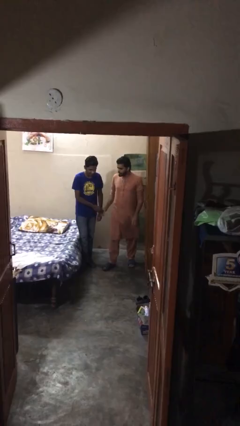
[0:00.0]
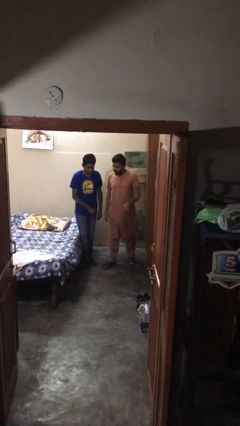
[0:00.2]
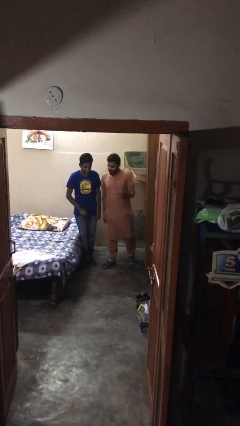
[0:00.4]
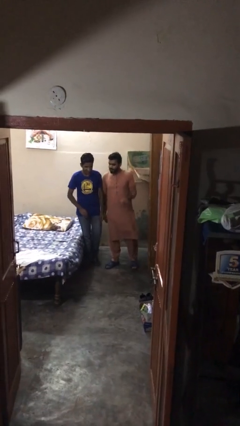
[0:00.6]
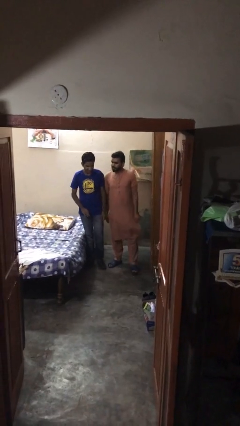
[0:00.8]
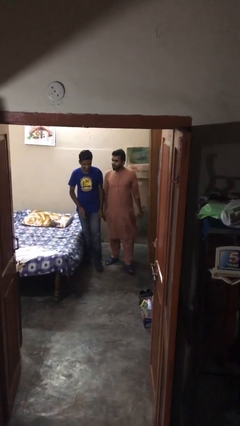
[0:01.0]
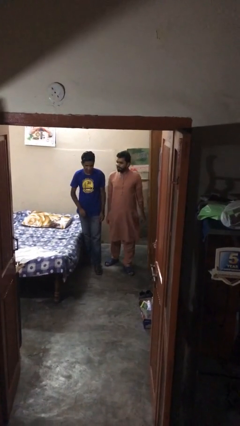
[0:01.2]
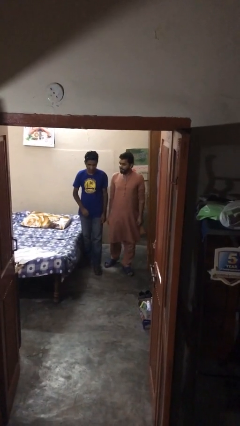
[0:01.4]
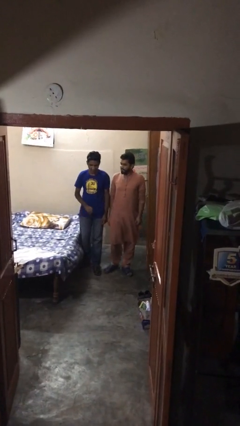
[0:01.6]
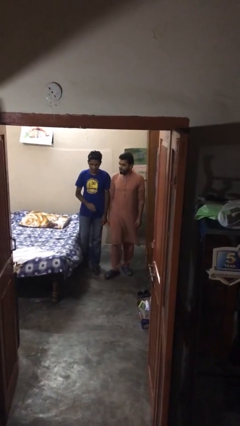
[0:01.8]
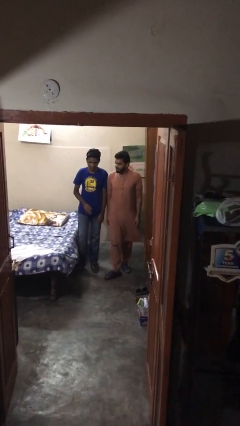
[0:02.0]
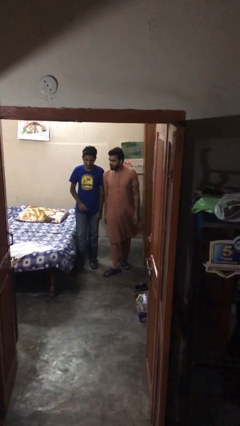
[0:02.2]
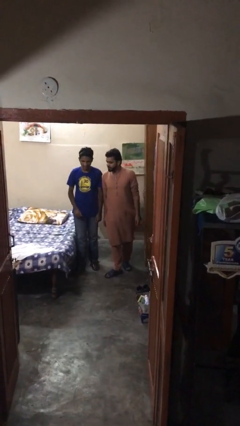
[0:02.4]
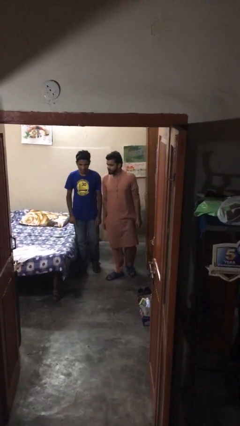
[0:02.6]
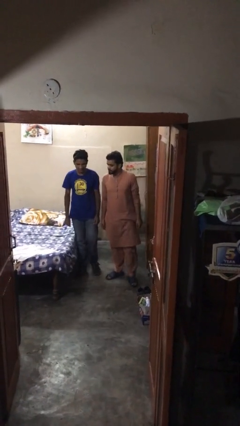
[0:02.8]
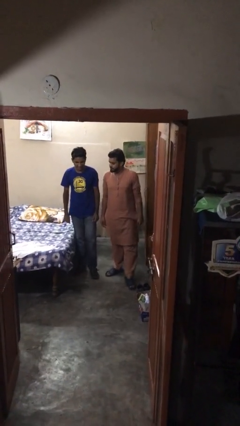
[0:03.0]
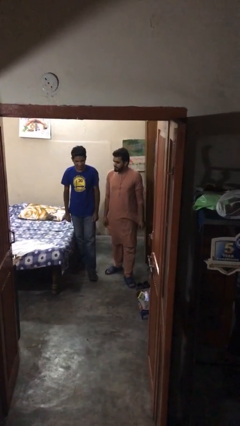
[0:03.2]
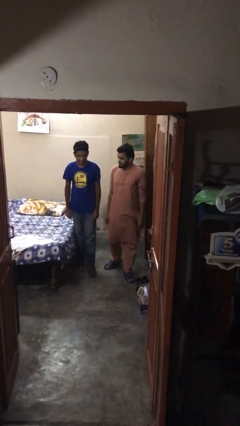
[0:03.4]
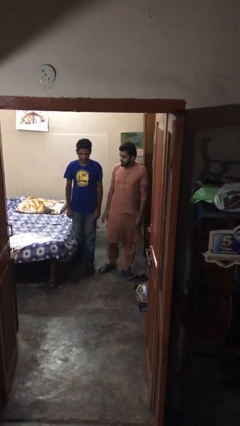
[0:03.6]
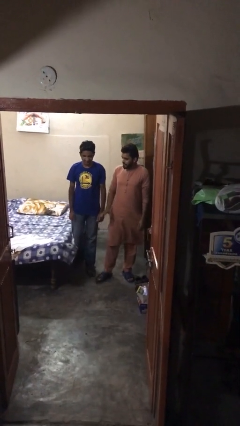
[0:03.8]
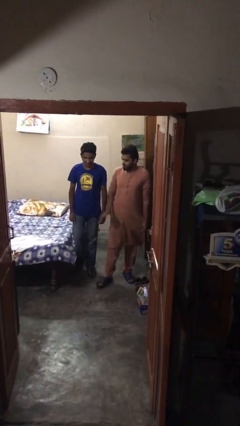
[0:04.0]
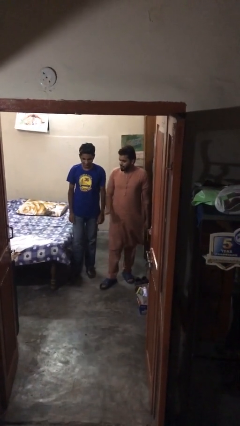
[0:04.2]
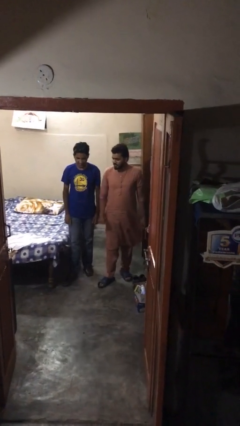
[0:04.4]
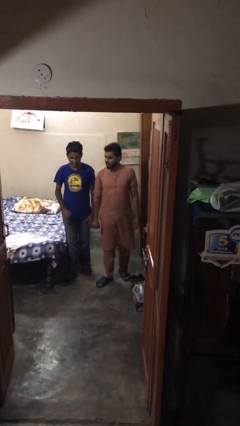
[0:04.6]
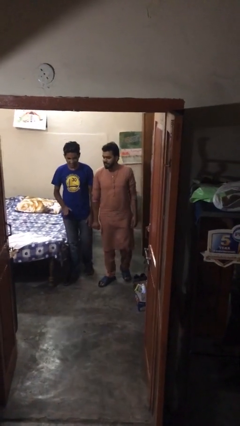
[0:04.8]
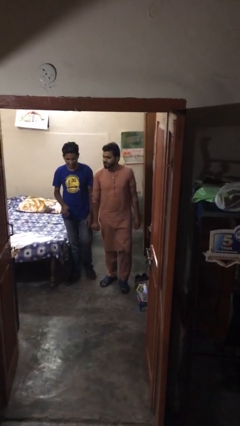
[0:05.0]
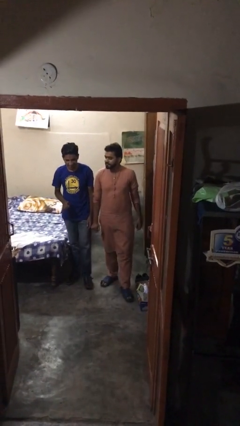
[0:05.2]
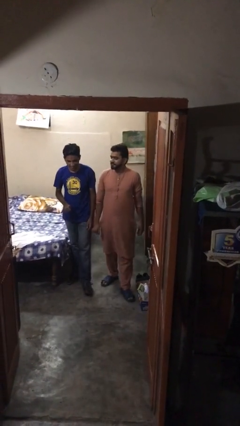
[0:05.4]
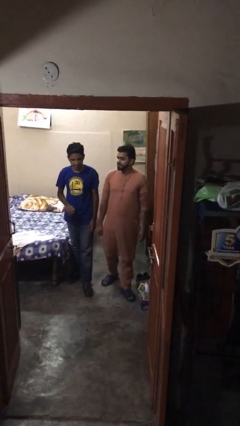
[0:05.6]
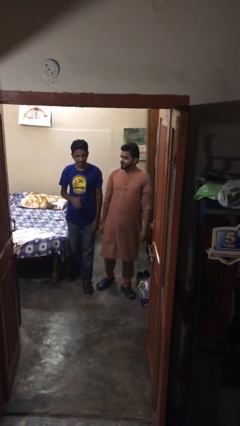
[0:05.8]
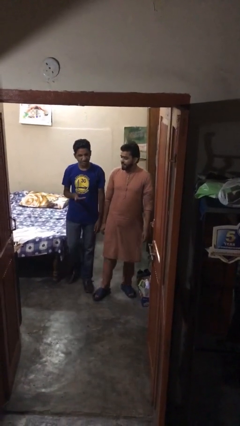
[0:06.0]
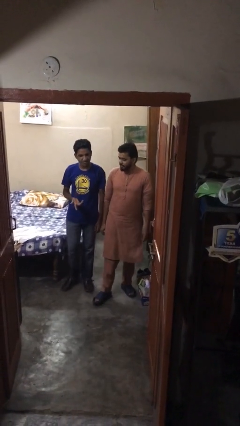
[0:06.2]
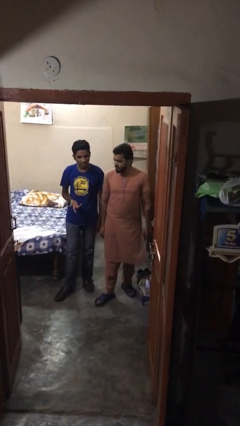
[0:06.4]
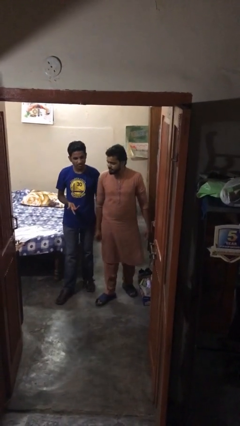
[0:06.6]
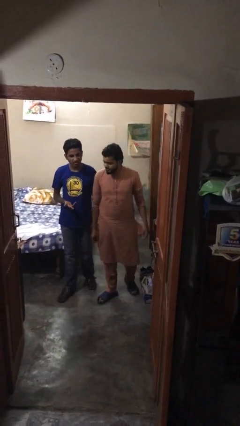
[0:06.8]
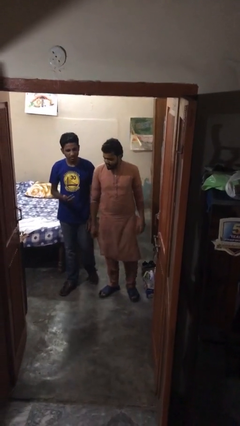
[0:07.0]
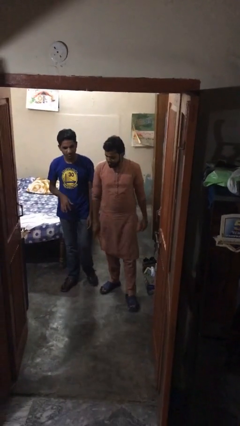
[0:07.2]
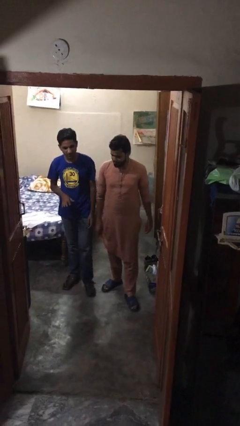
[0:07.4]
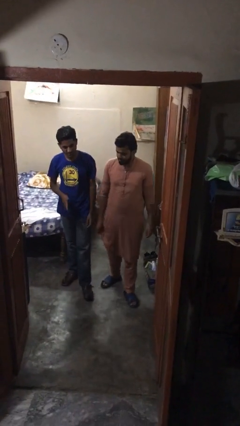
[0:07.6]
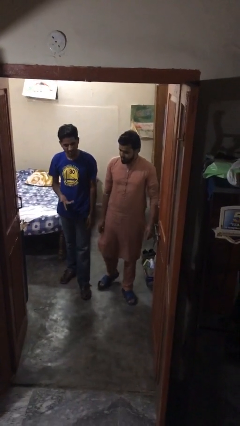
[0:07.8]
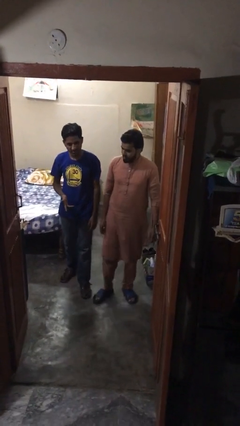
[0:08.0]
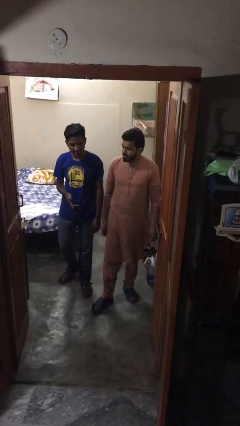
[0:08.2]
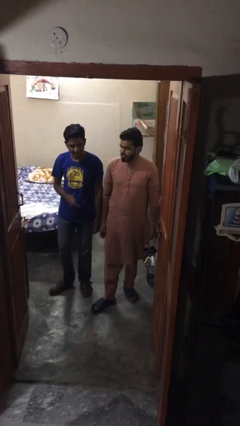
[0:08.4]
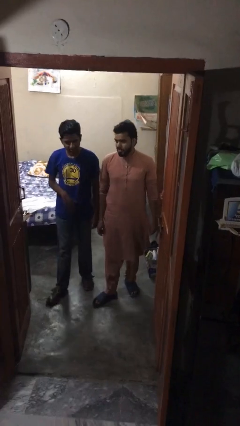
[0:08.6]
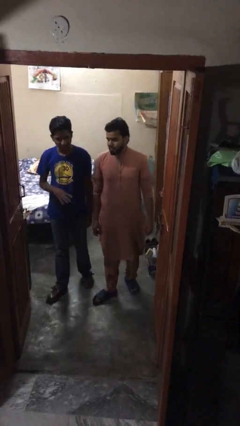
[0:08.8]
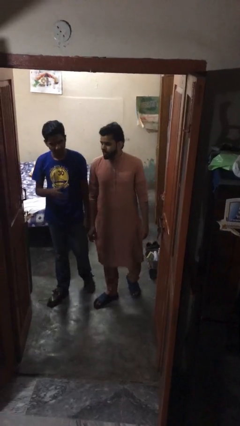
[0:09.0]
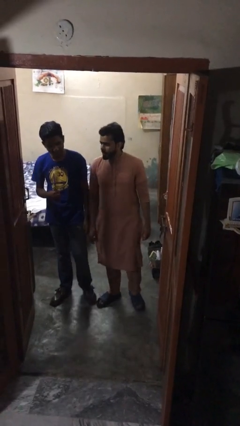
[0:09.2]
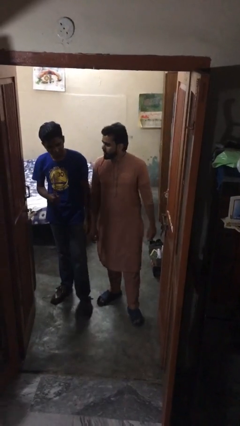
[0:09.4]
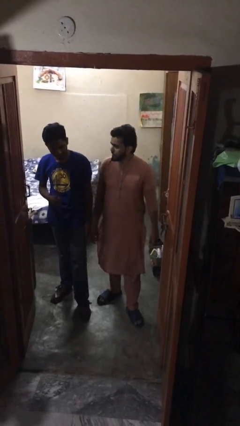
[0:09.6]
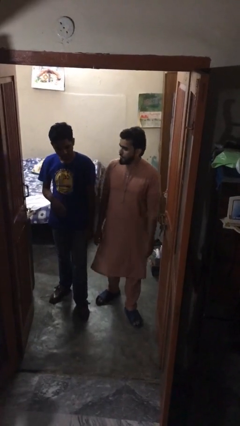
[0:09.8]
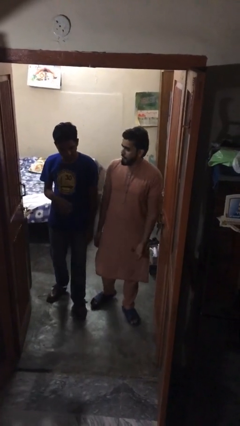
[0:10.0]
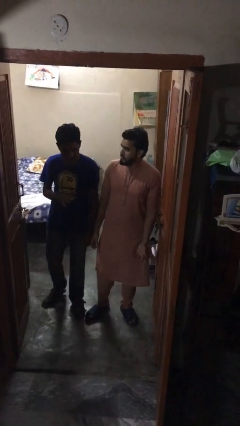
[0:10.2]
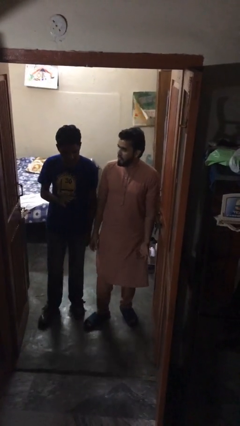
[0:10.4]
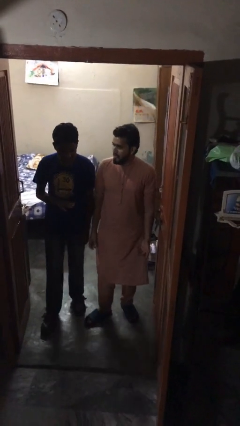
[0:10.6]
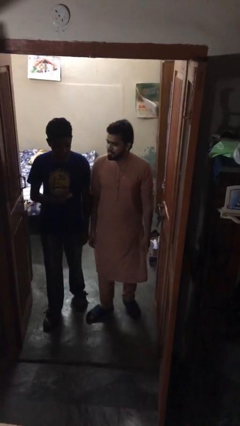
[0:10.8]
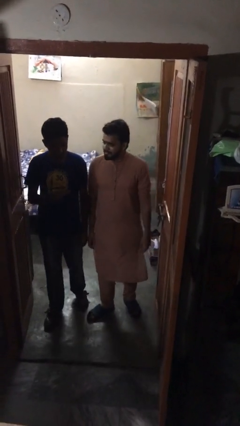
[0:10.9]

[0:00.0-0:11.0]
person talks to person

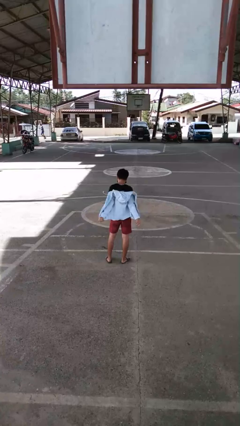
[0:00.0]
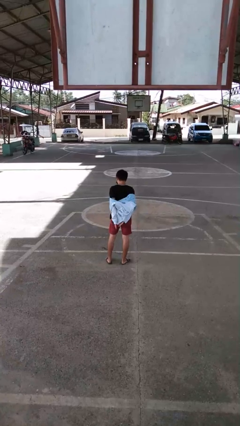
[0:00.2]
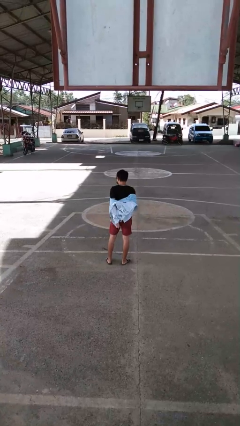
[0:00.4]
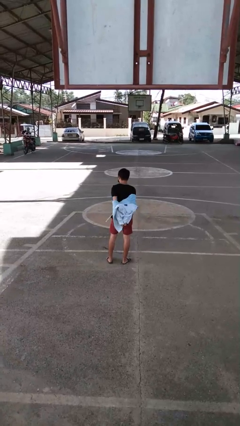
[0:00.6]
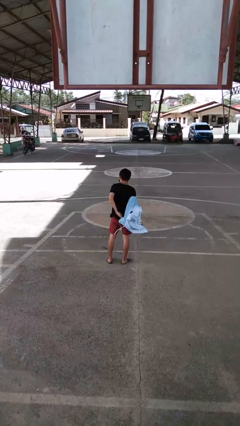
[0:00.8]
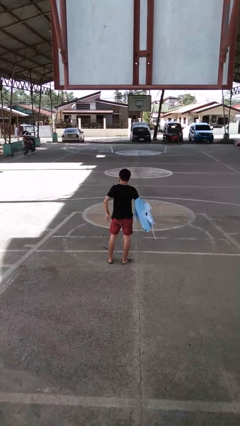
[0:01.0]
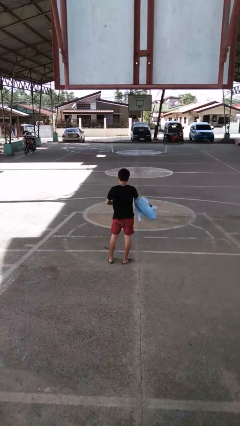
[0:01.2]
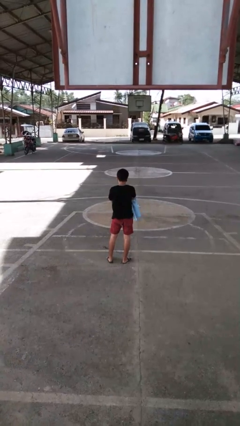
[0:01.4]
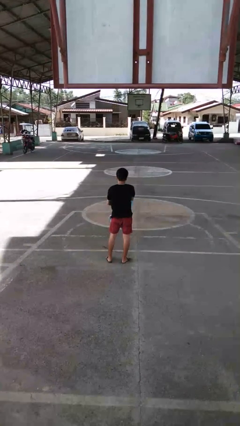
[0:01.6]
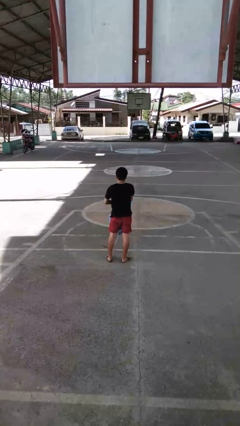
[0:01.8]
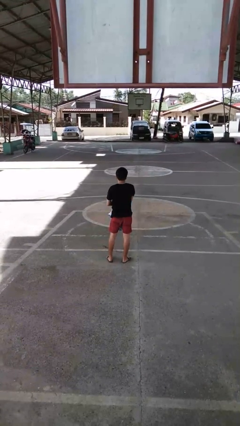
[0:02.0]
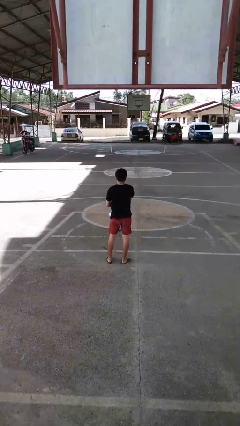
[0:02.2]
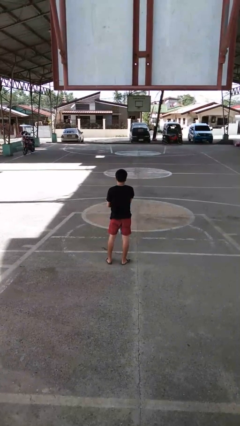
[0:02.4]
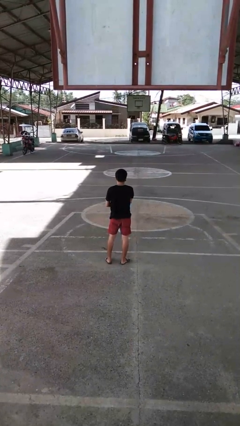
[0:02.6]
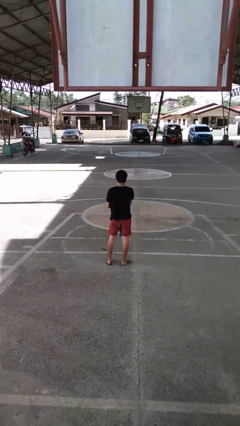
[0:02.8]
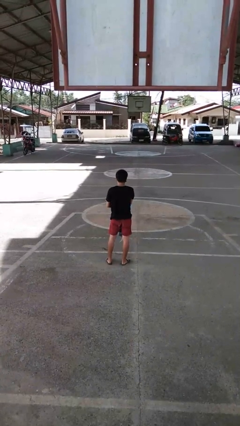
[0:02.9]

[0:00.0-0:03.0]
person takes off jacket

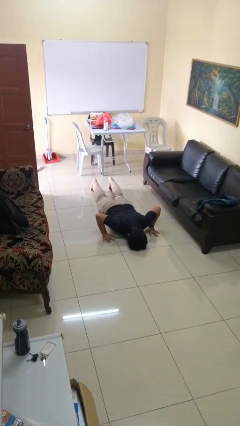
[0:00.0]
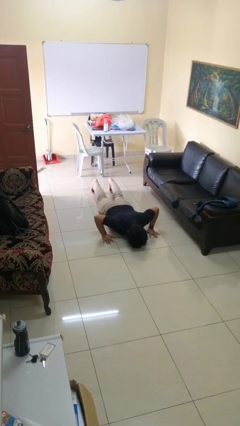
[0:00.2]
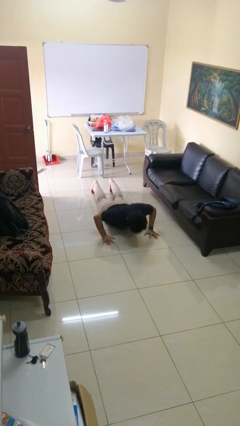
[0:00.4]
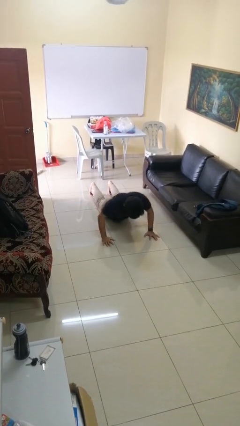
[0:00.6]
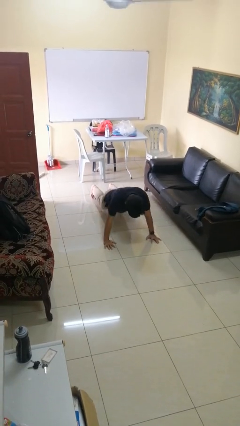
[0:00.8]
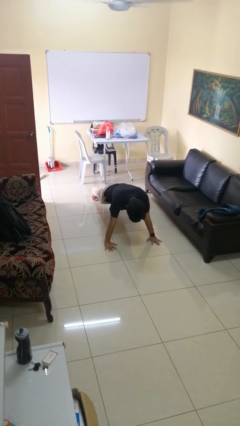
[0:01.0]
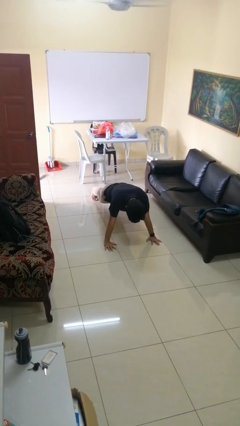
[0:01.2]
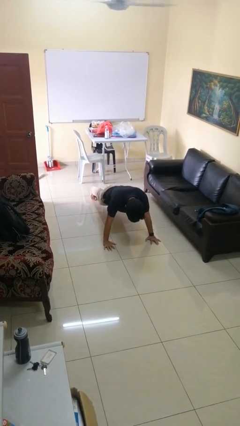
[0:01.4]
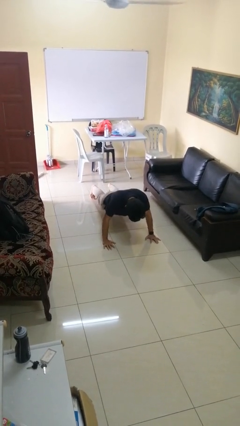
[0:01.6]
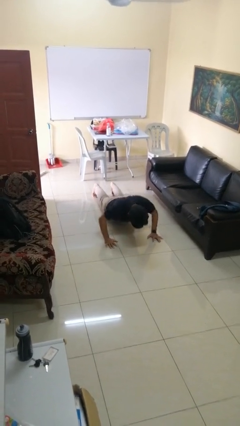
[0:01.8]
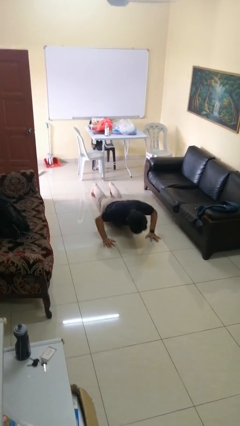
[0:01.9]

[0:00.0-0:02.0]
person exercises with pushup

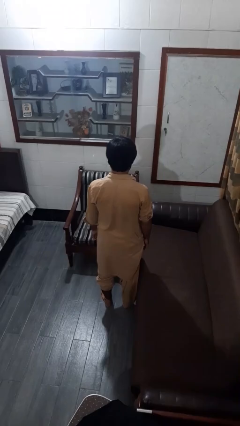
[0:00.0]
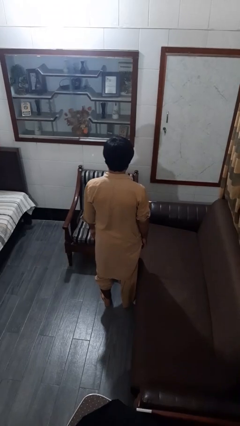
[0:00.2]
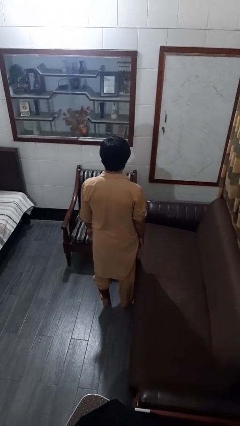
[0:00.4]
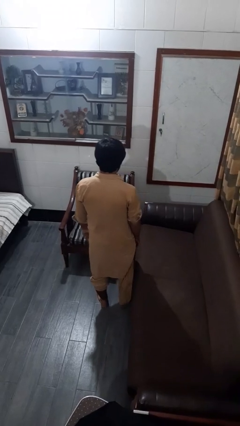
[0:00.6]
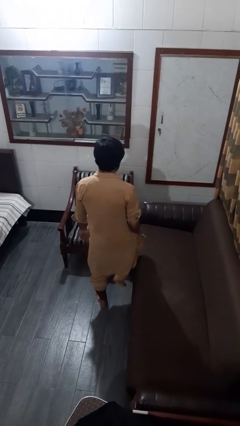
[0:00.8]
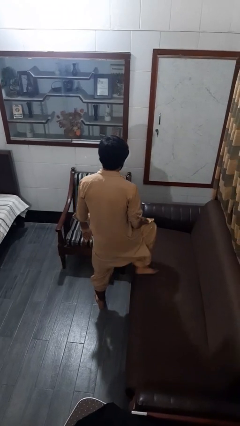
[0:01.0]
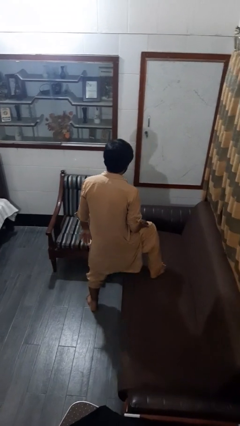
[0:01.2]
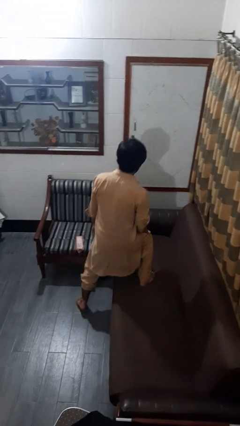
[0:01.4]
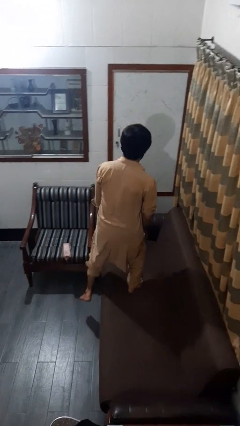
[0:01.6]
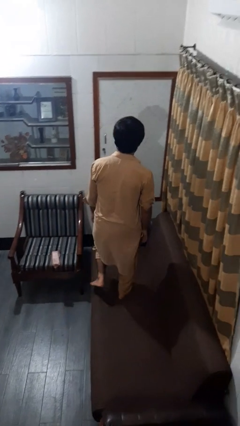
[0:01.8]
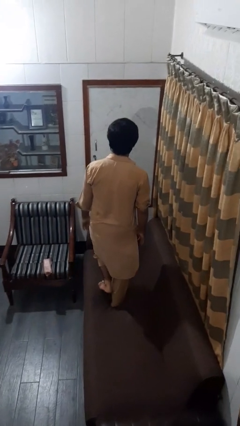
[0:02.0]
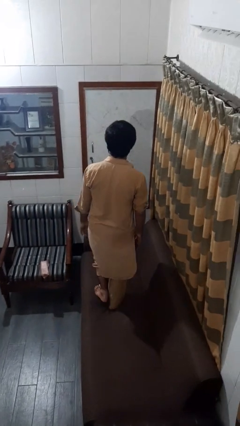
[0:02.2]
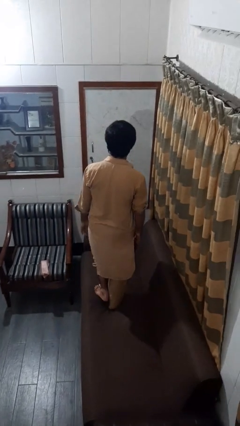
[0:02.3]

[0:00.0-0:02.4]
person climbs on couch
